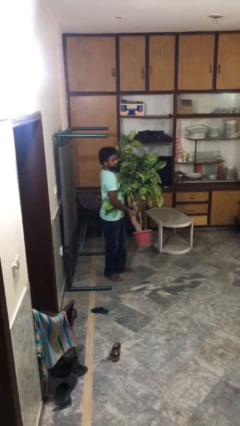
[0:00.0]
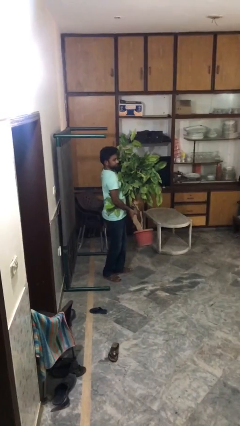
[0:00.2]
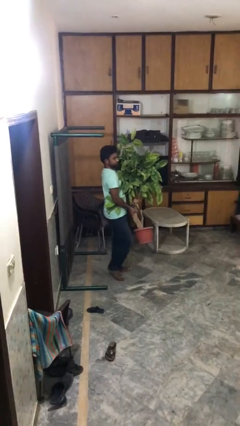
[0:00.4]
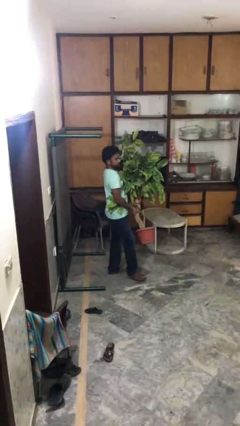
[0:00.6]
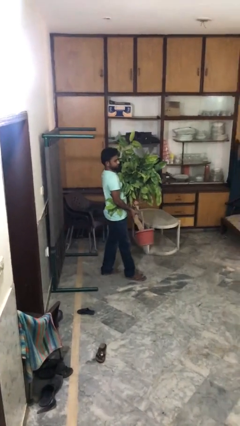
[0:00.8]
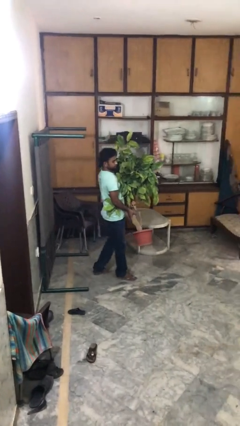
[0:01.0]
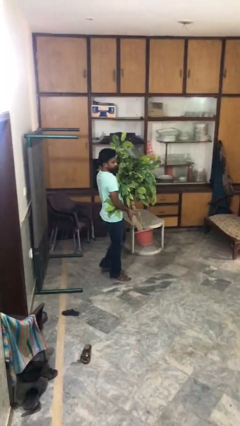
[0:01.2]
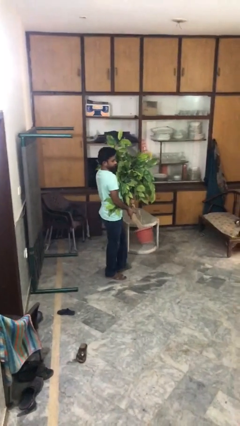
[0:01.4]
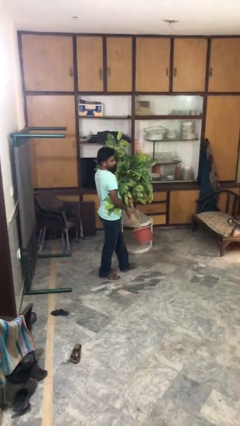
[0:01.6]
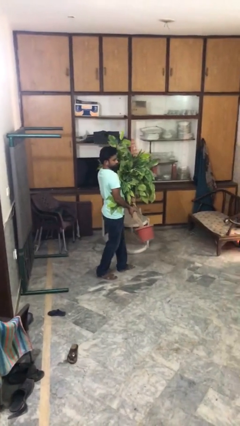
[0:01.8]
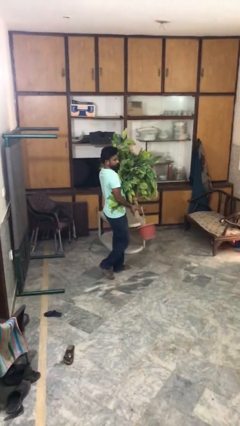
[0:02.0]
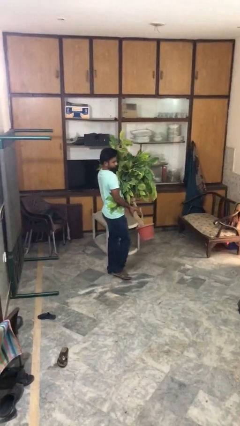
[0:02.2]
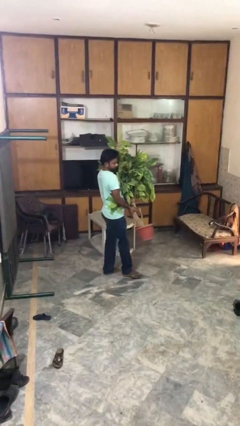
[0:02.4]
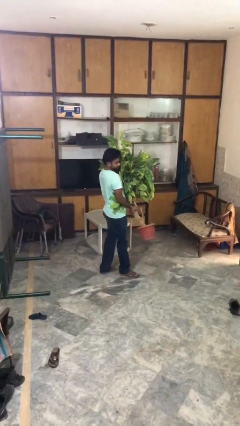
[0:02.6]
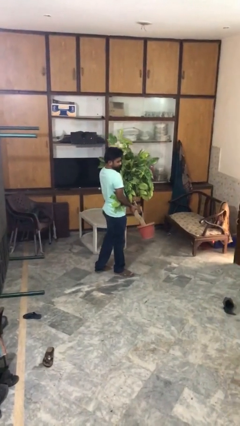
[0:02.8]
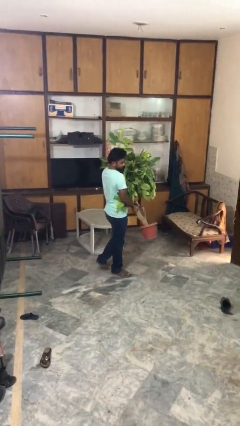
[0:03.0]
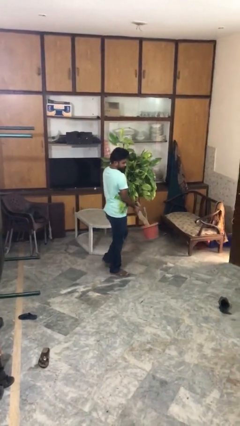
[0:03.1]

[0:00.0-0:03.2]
person carries heavy object

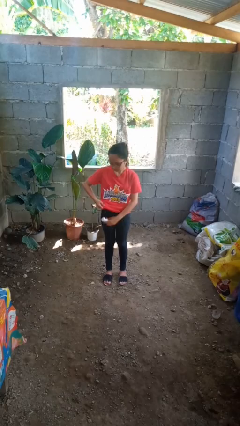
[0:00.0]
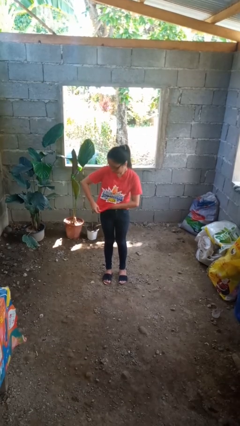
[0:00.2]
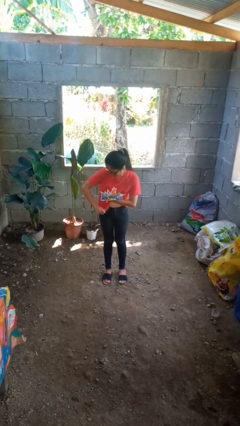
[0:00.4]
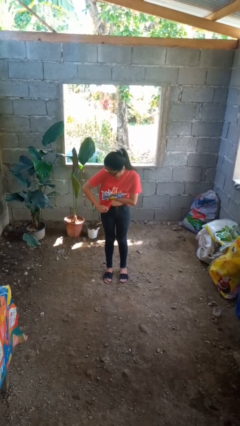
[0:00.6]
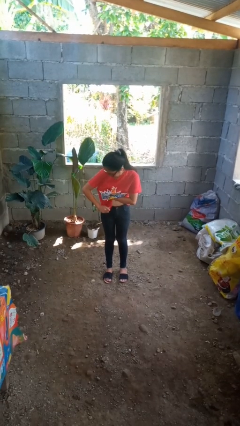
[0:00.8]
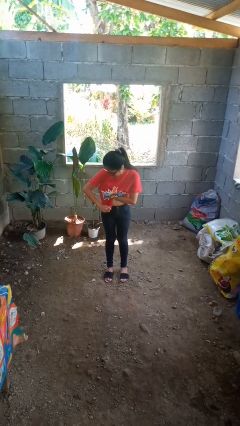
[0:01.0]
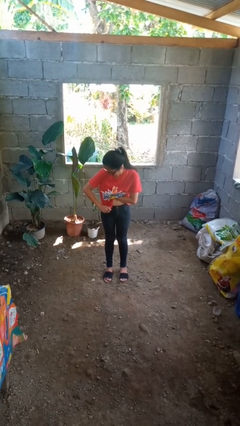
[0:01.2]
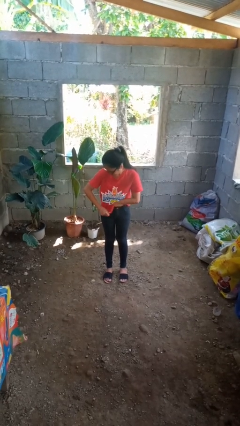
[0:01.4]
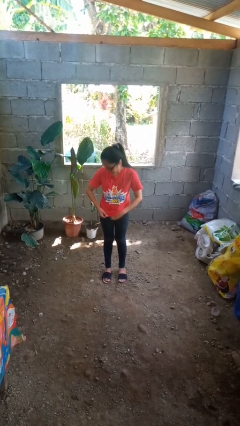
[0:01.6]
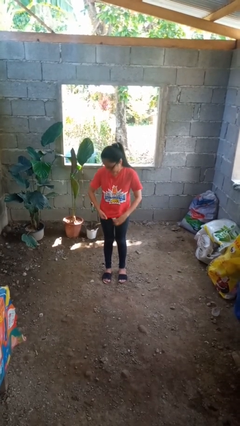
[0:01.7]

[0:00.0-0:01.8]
person applies deodorant

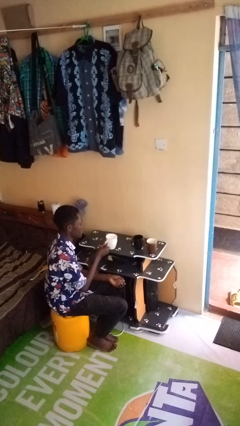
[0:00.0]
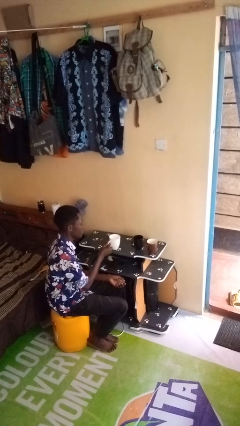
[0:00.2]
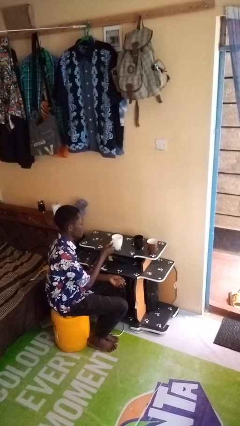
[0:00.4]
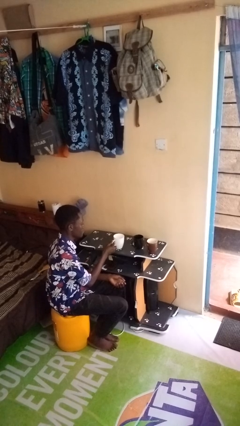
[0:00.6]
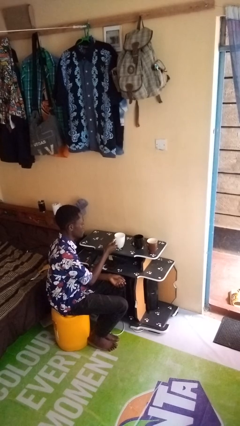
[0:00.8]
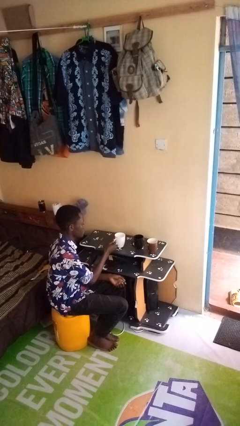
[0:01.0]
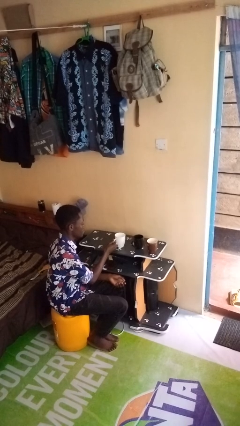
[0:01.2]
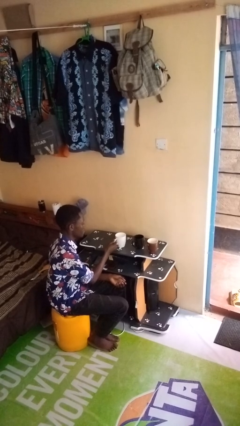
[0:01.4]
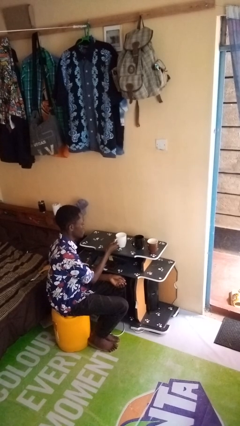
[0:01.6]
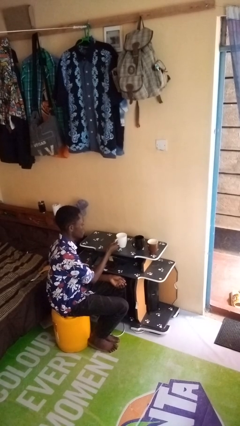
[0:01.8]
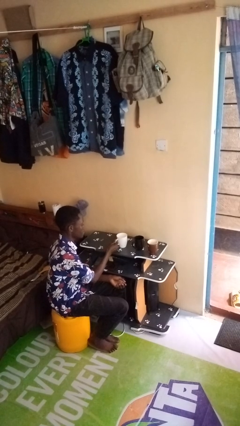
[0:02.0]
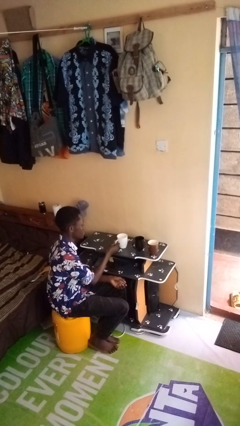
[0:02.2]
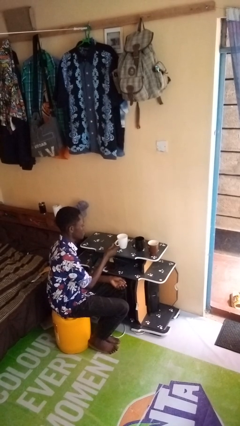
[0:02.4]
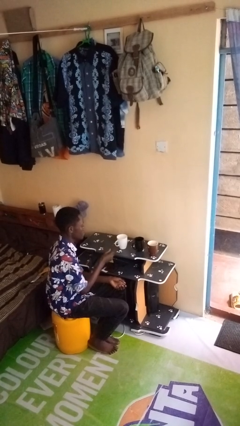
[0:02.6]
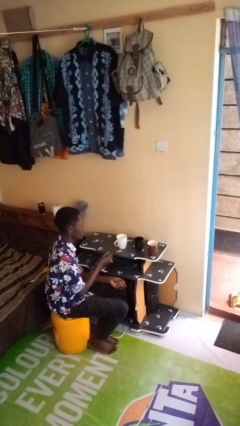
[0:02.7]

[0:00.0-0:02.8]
person puts down object on table

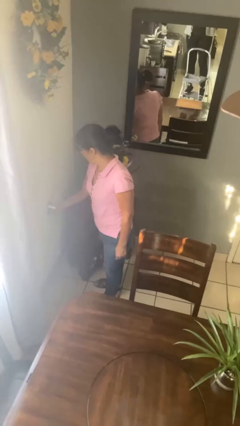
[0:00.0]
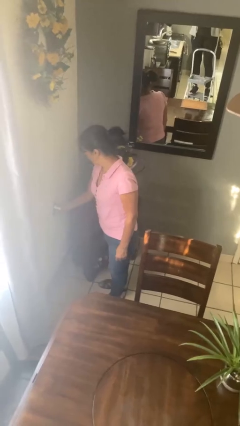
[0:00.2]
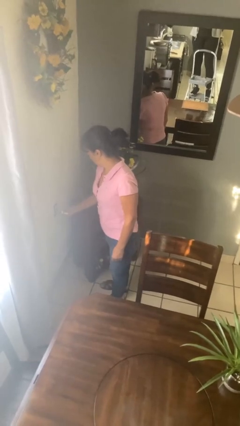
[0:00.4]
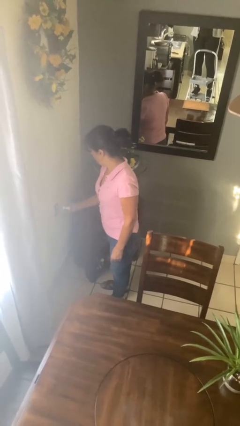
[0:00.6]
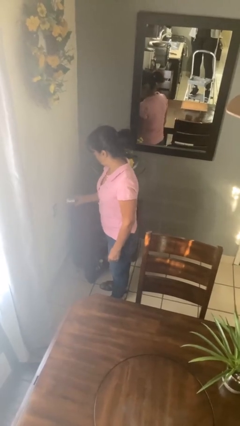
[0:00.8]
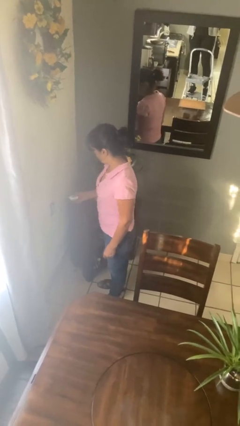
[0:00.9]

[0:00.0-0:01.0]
person unplugs from electrical socket

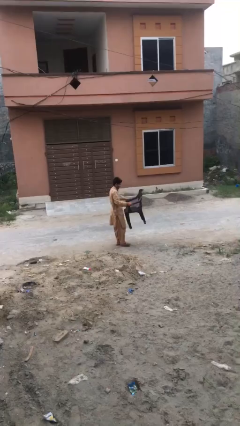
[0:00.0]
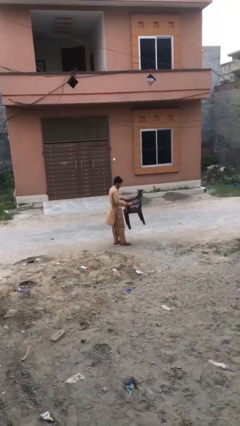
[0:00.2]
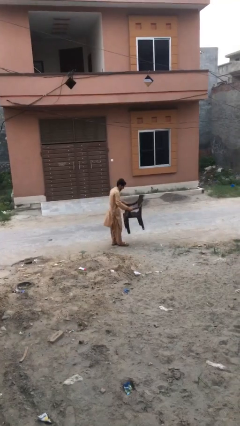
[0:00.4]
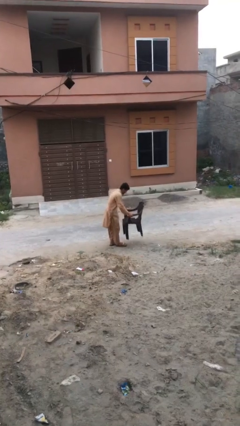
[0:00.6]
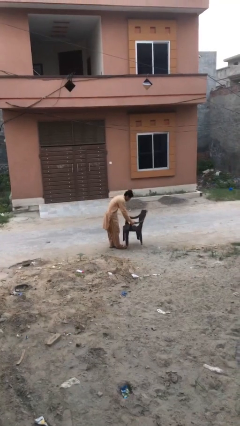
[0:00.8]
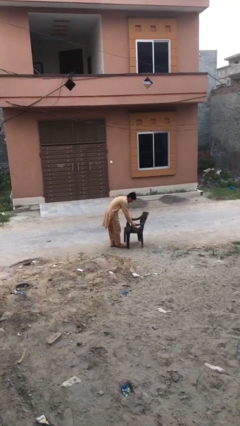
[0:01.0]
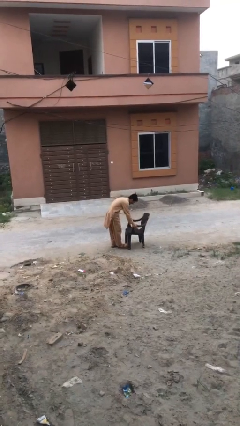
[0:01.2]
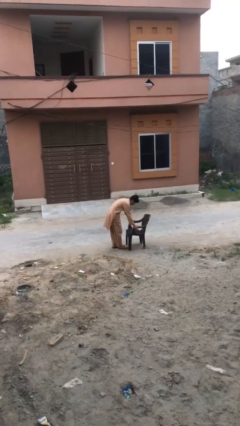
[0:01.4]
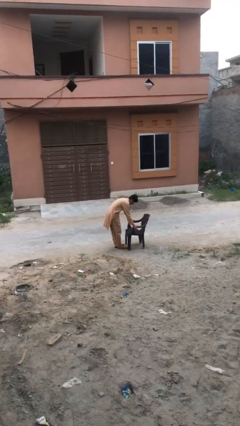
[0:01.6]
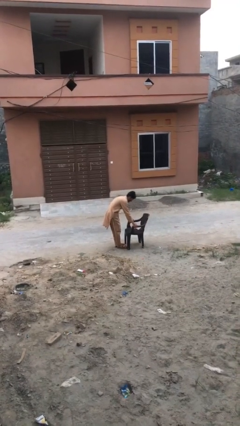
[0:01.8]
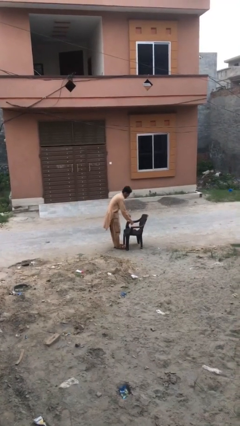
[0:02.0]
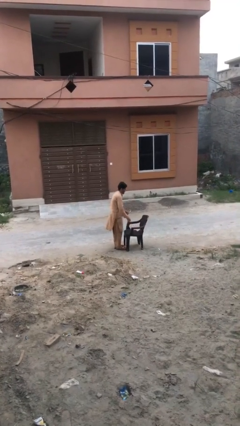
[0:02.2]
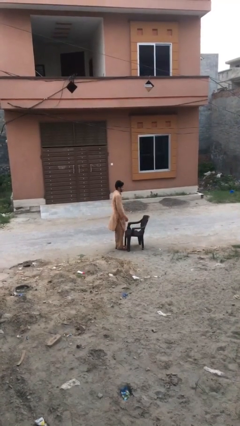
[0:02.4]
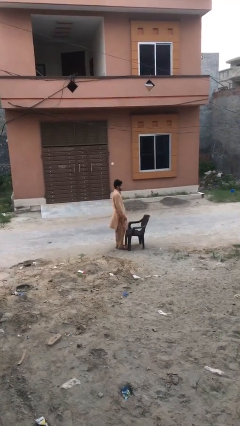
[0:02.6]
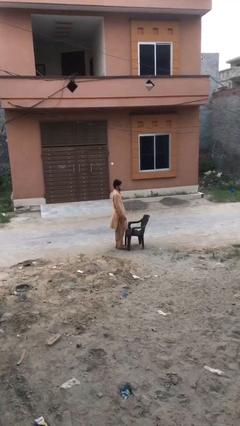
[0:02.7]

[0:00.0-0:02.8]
person puts down object on floor

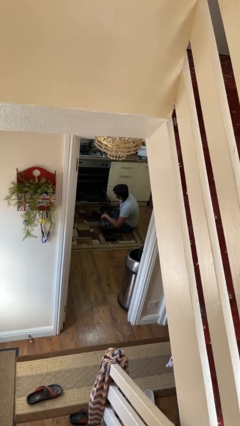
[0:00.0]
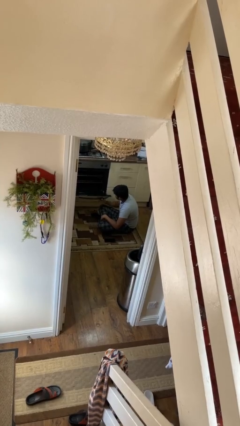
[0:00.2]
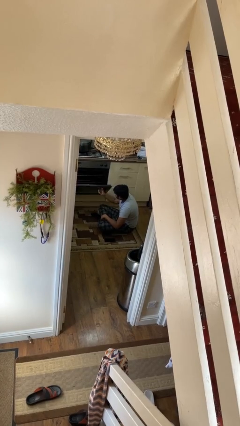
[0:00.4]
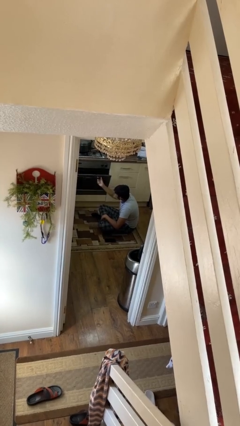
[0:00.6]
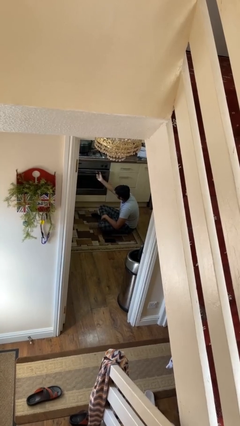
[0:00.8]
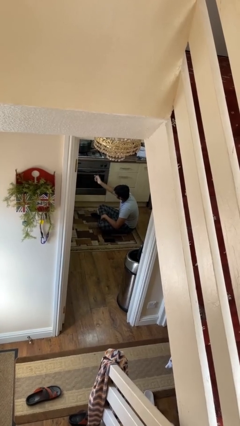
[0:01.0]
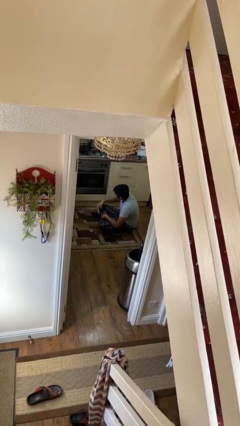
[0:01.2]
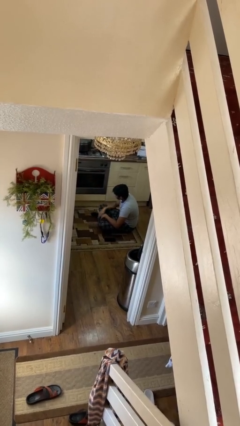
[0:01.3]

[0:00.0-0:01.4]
person closes oven door

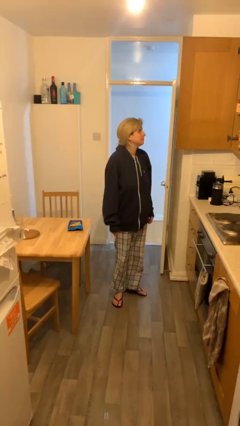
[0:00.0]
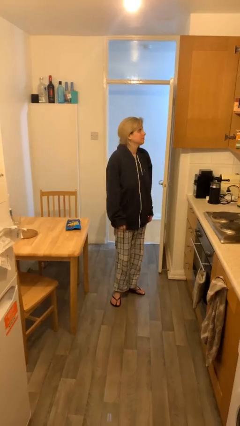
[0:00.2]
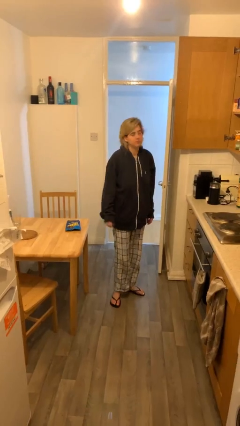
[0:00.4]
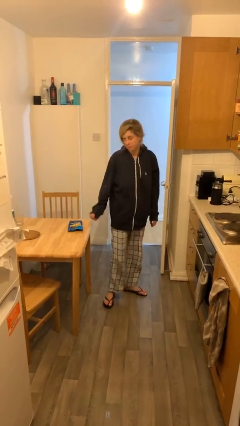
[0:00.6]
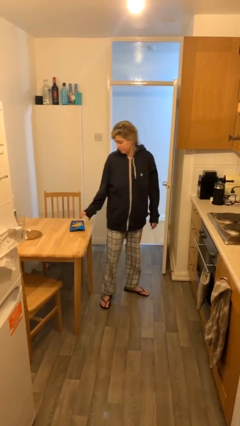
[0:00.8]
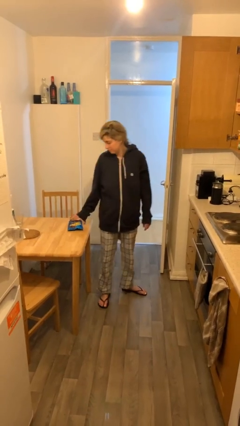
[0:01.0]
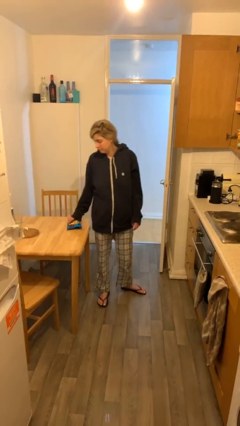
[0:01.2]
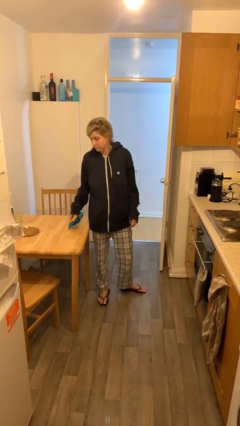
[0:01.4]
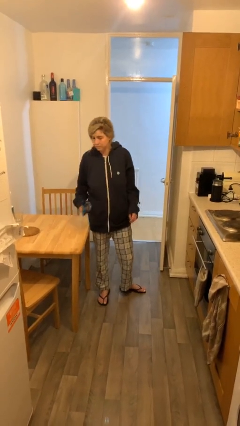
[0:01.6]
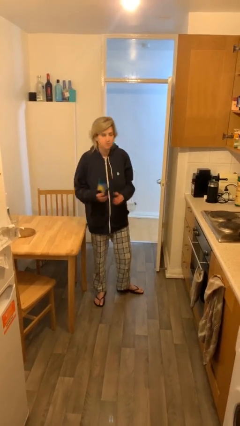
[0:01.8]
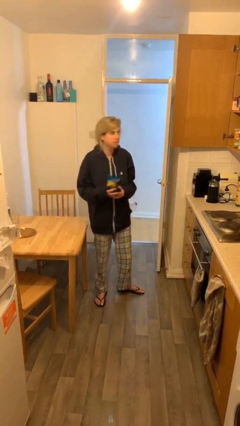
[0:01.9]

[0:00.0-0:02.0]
person picks up object from table

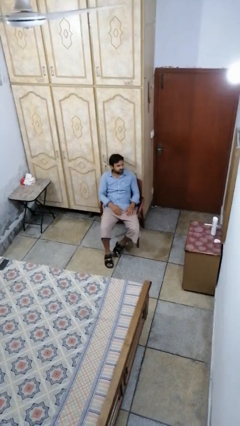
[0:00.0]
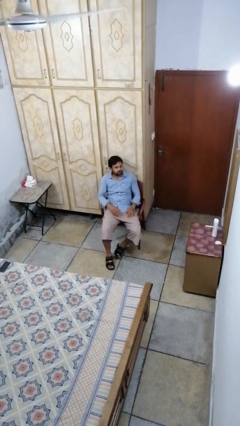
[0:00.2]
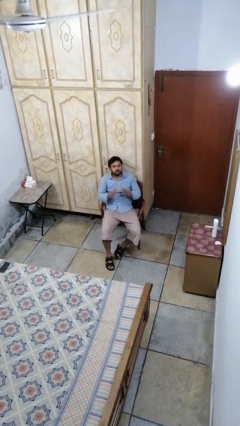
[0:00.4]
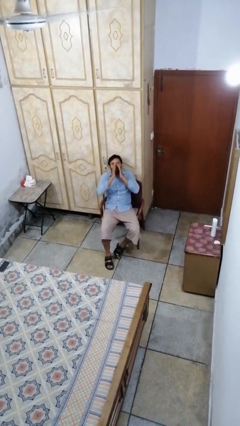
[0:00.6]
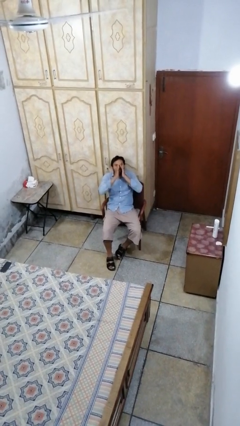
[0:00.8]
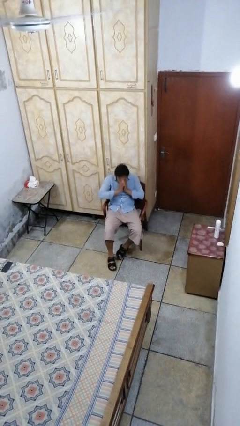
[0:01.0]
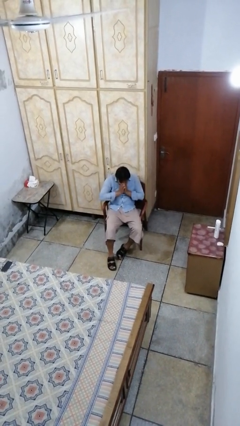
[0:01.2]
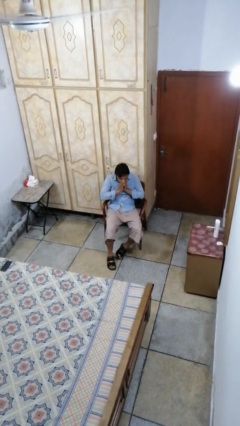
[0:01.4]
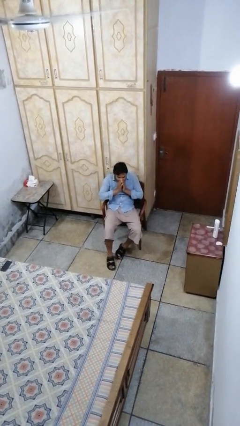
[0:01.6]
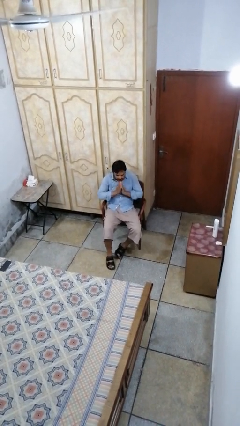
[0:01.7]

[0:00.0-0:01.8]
person sneezes into hand
